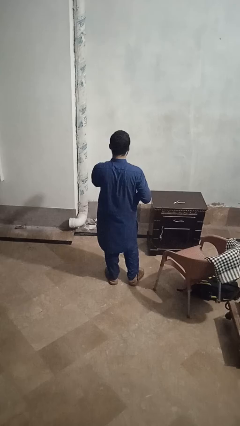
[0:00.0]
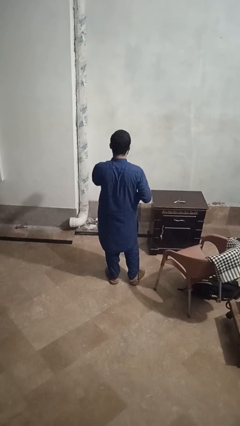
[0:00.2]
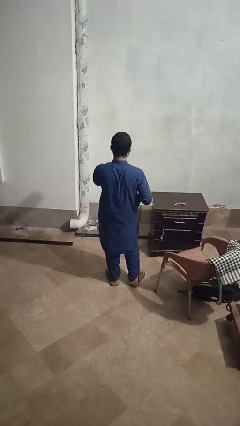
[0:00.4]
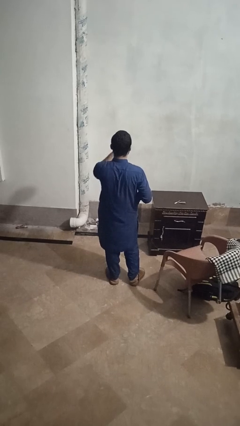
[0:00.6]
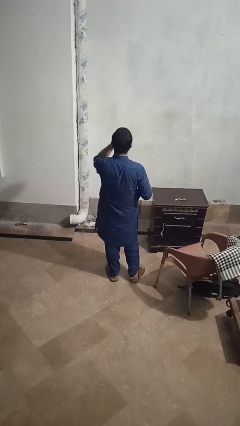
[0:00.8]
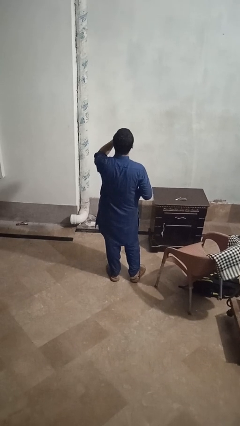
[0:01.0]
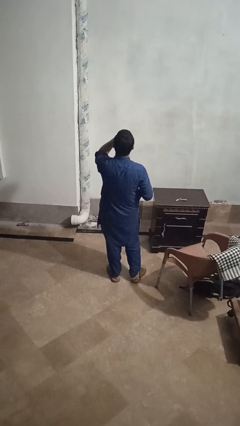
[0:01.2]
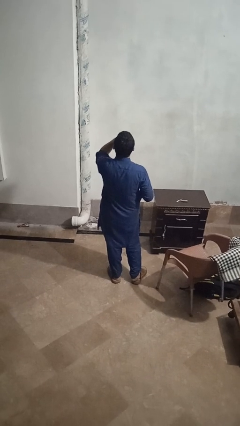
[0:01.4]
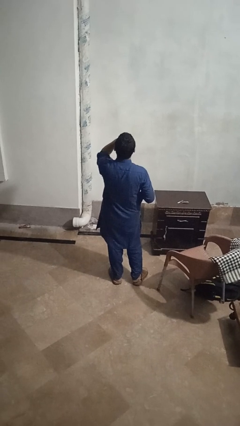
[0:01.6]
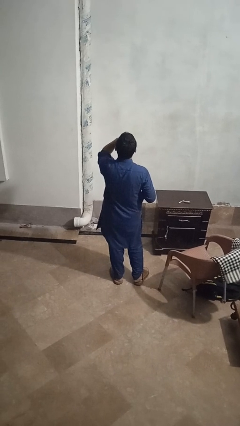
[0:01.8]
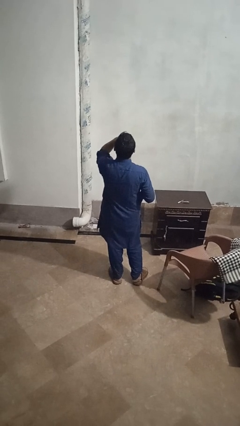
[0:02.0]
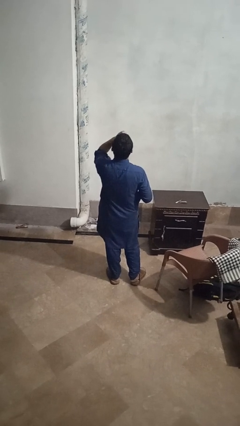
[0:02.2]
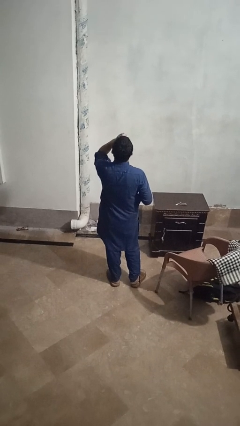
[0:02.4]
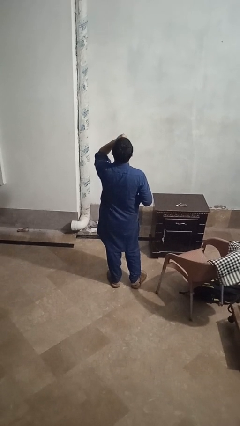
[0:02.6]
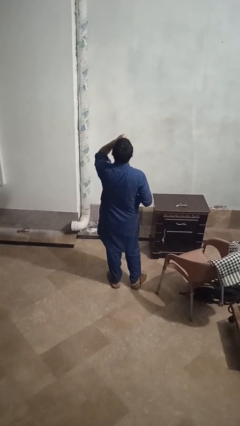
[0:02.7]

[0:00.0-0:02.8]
person drinks from beverage can

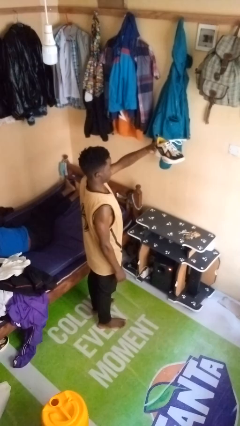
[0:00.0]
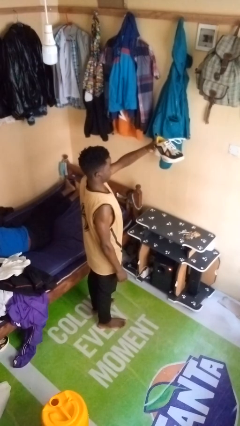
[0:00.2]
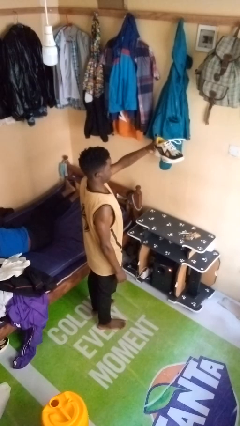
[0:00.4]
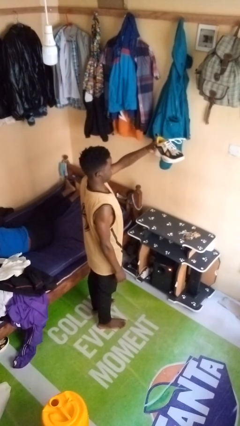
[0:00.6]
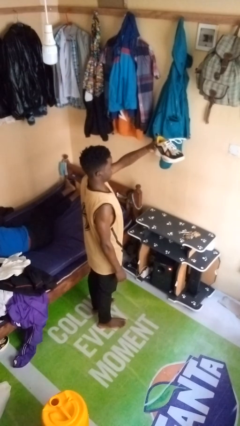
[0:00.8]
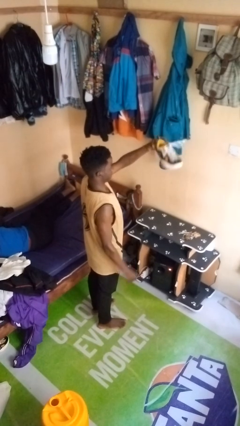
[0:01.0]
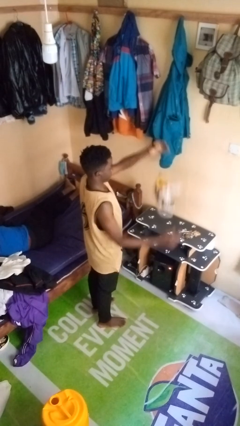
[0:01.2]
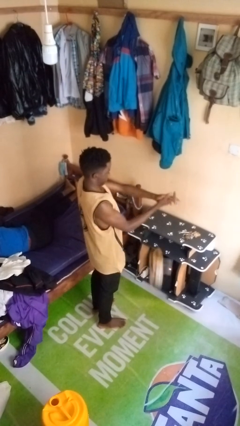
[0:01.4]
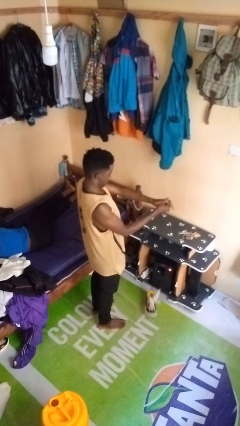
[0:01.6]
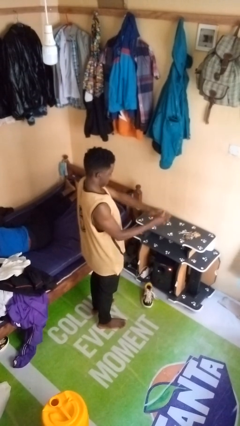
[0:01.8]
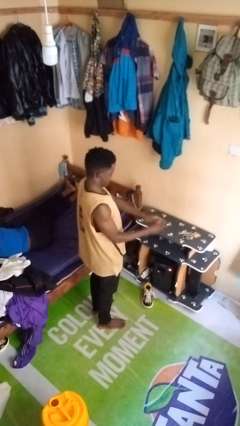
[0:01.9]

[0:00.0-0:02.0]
person drops object

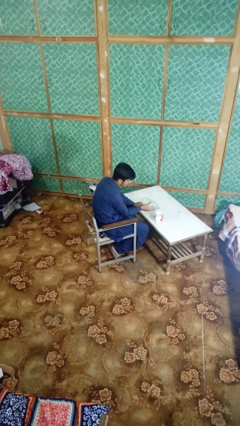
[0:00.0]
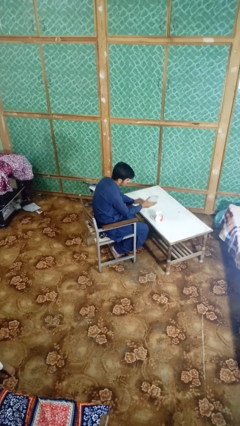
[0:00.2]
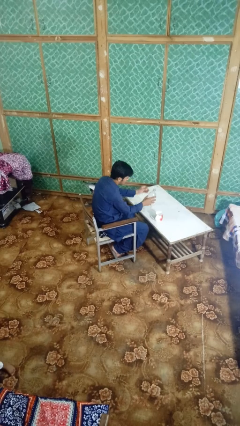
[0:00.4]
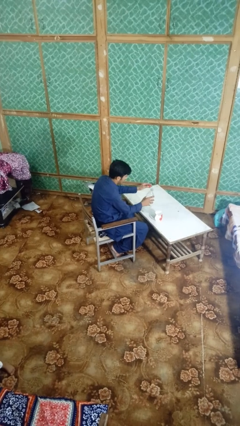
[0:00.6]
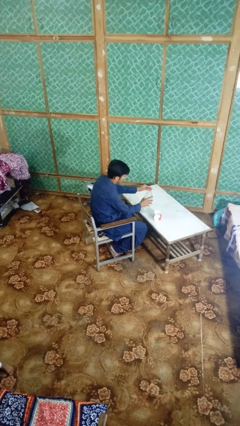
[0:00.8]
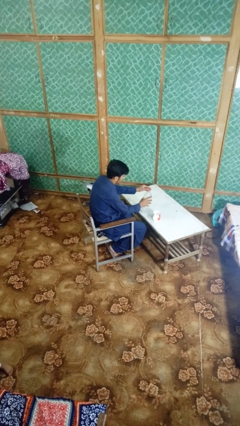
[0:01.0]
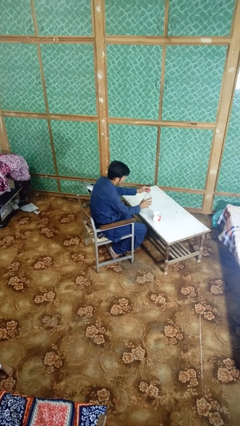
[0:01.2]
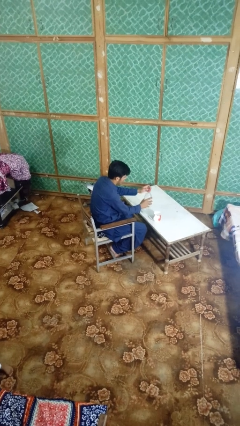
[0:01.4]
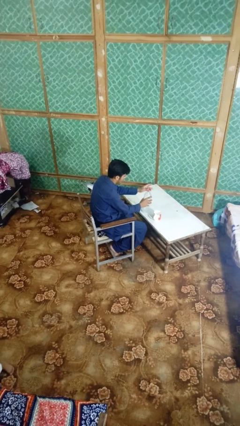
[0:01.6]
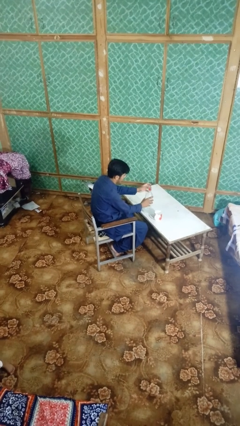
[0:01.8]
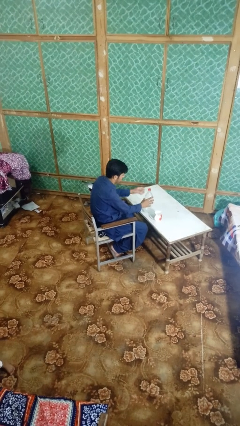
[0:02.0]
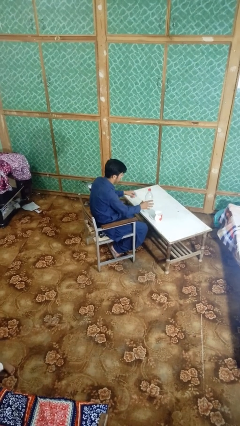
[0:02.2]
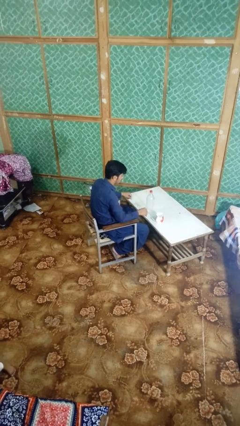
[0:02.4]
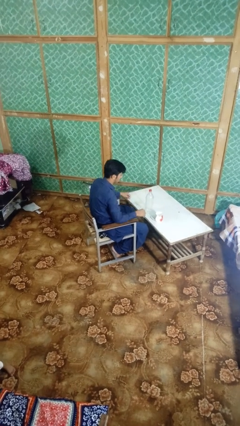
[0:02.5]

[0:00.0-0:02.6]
person screws lid to bottle

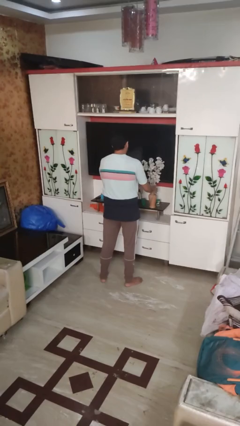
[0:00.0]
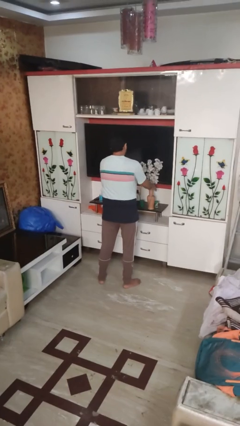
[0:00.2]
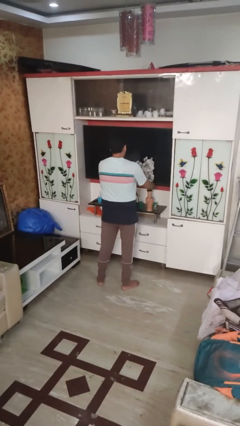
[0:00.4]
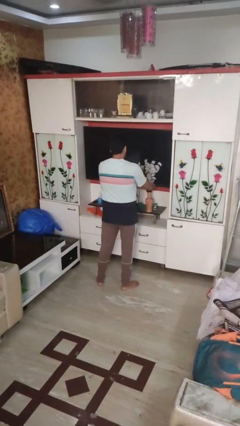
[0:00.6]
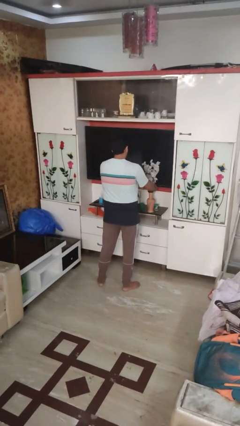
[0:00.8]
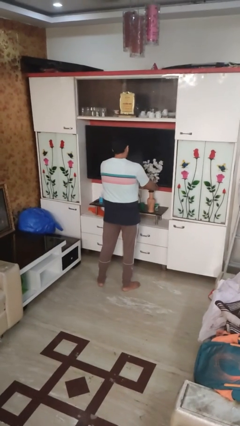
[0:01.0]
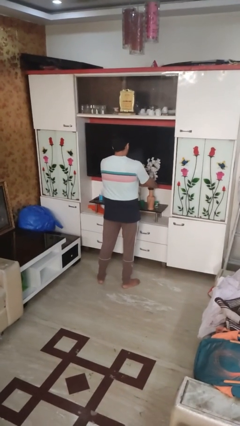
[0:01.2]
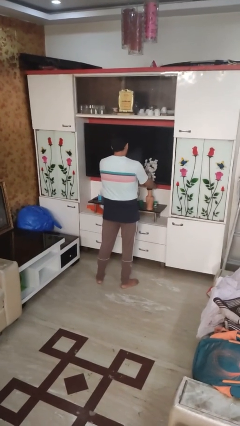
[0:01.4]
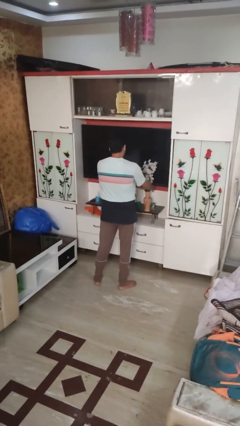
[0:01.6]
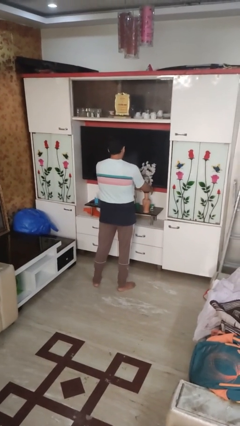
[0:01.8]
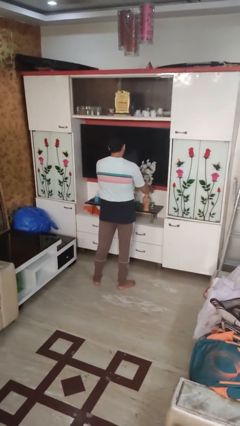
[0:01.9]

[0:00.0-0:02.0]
person arranges flowers in vase

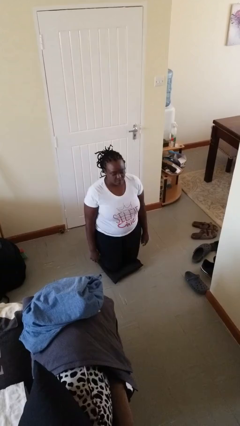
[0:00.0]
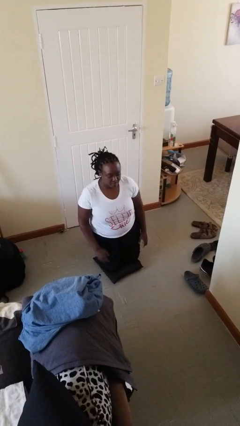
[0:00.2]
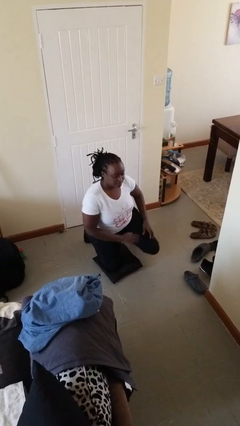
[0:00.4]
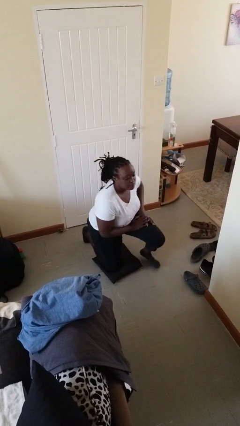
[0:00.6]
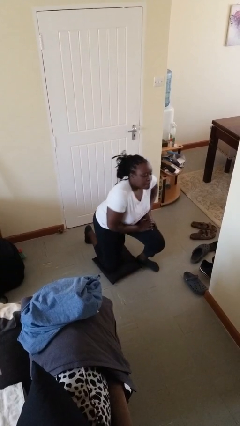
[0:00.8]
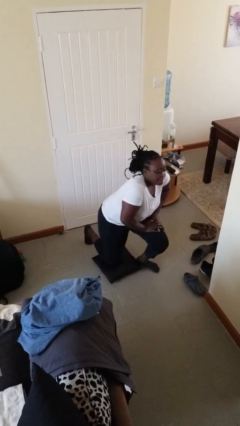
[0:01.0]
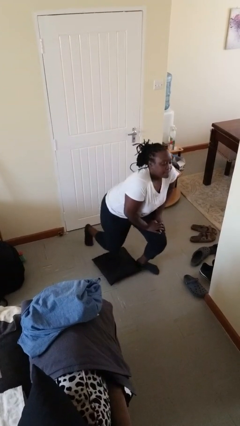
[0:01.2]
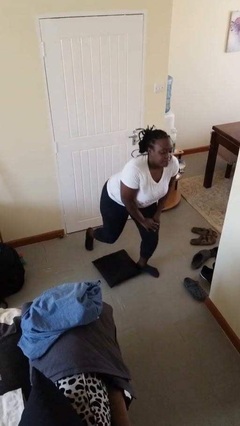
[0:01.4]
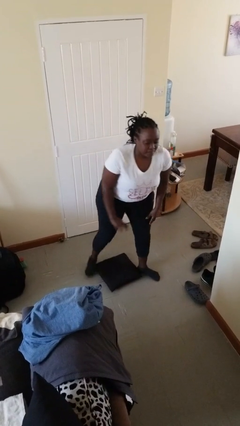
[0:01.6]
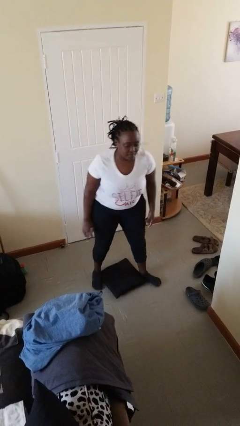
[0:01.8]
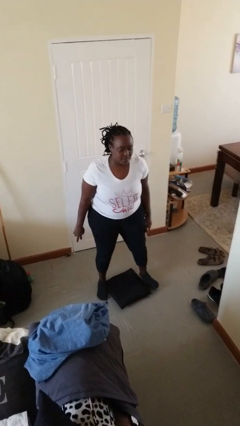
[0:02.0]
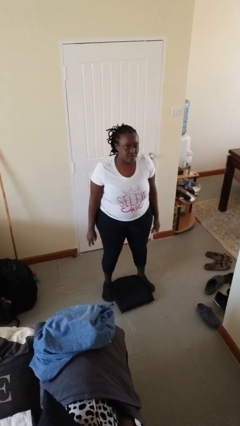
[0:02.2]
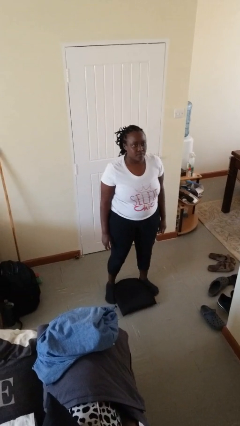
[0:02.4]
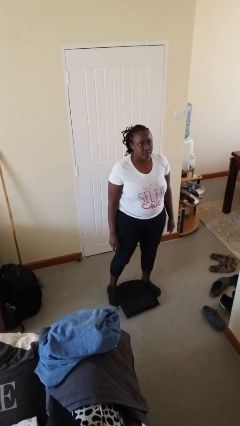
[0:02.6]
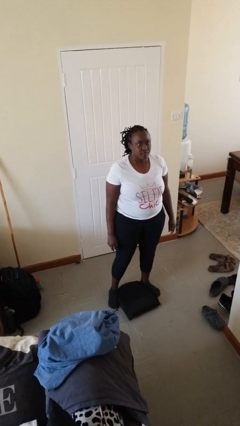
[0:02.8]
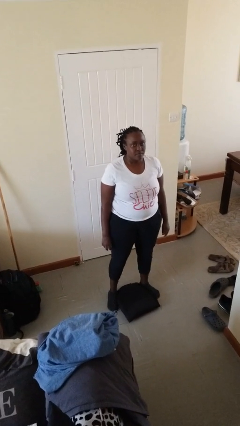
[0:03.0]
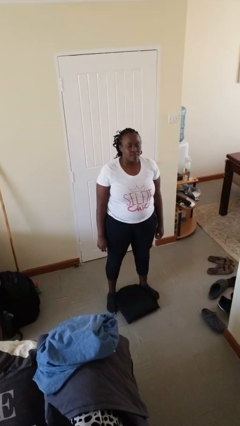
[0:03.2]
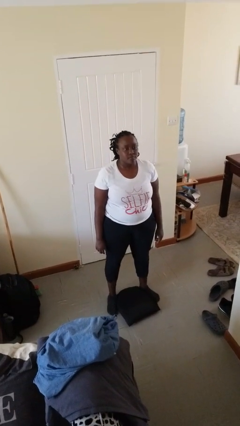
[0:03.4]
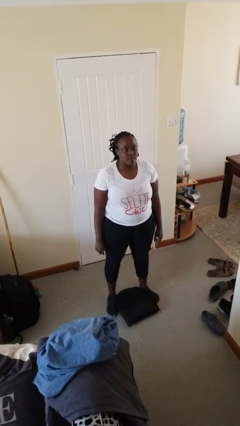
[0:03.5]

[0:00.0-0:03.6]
person stands up from floor

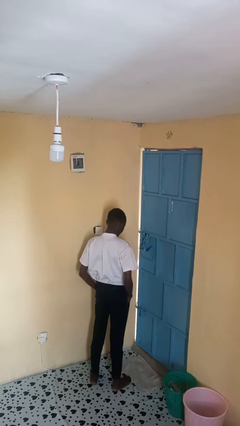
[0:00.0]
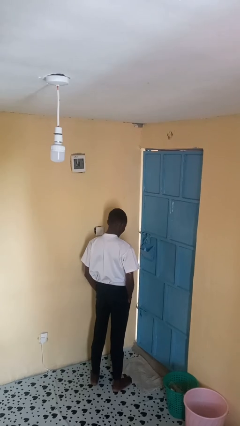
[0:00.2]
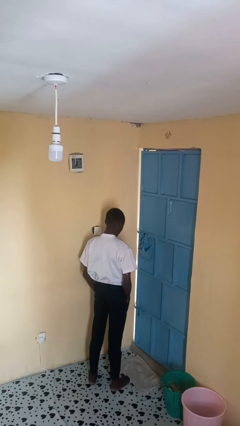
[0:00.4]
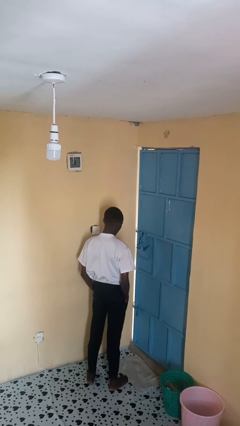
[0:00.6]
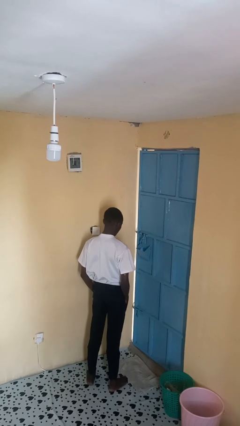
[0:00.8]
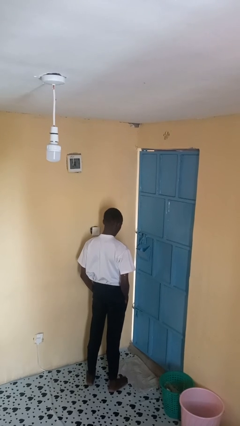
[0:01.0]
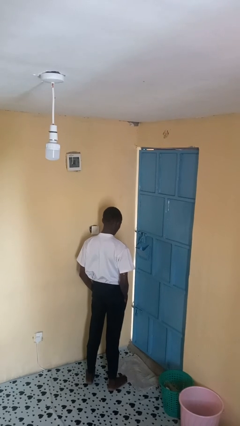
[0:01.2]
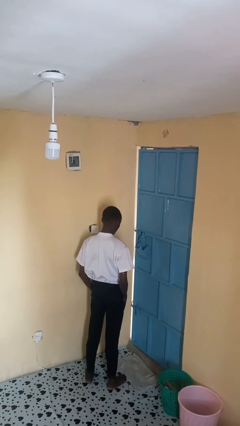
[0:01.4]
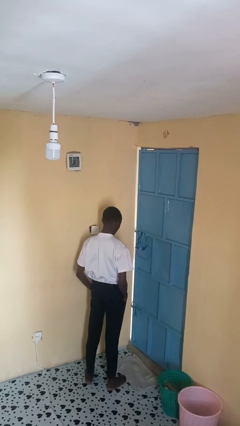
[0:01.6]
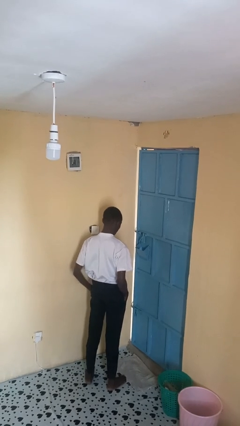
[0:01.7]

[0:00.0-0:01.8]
person puts hands in back pockets

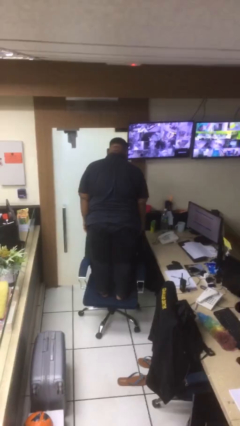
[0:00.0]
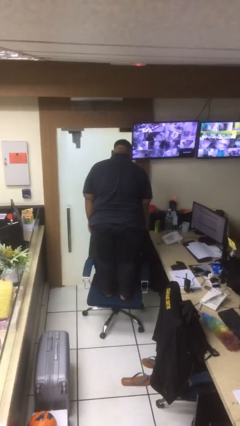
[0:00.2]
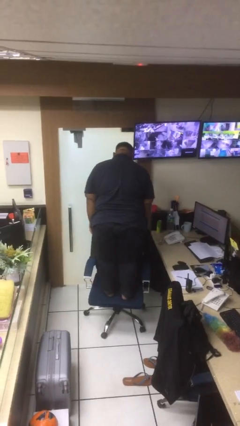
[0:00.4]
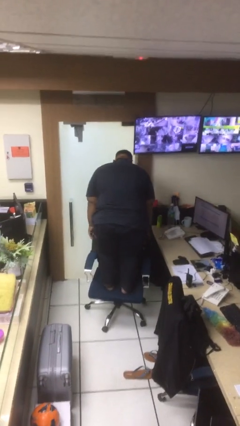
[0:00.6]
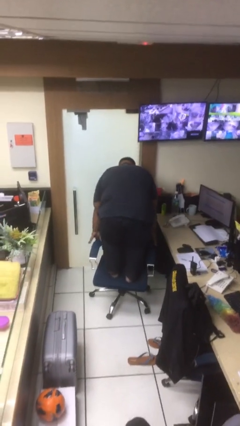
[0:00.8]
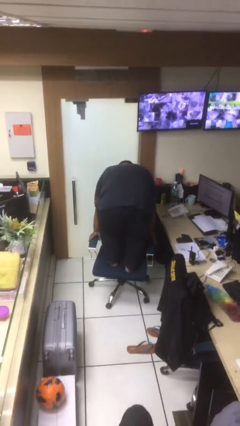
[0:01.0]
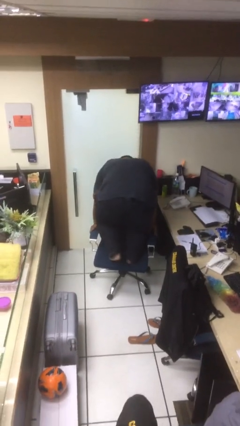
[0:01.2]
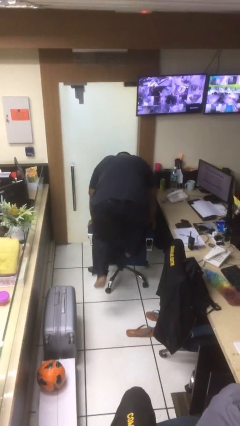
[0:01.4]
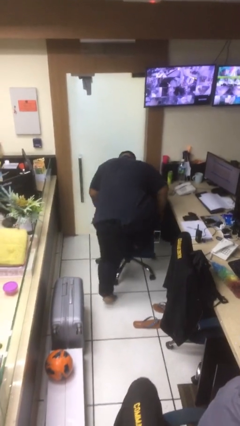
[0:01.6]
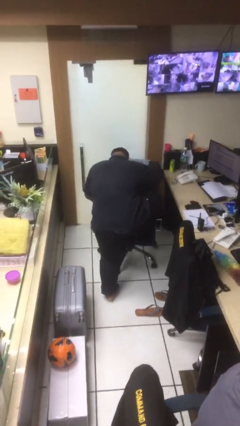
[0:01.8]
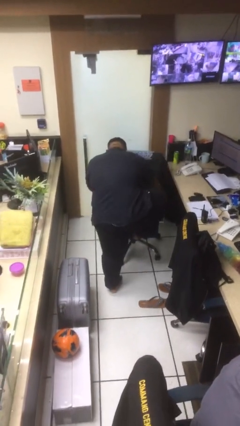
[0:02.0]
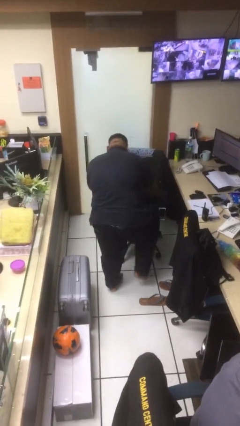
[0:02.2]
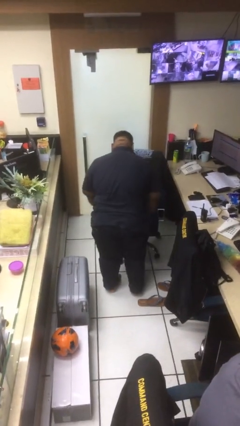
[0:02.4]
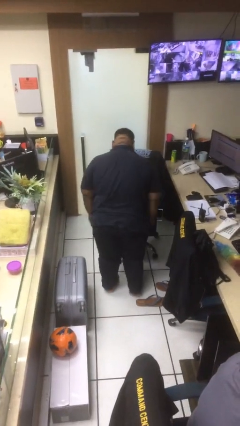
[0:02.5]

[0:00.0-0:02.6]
person climbs off chair
